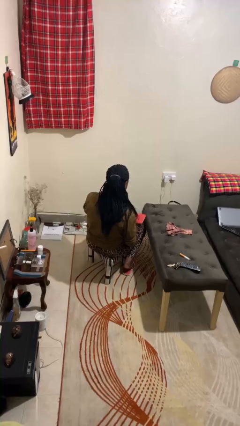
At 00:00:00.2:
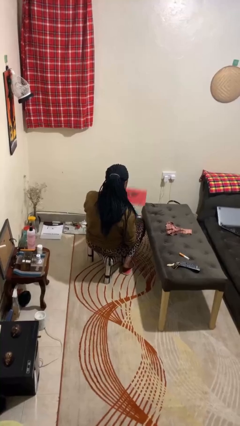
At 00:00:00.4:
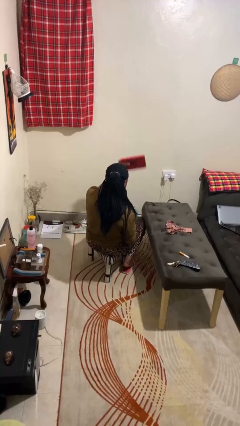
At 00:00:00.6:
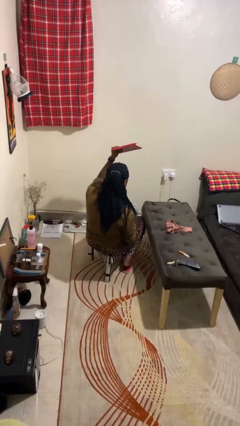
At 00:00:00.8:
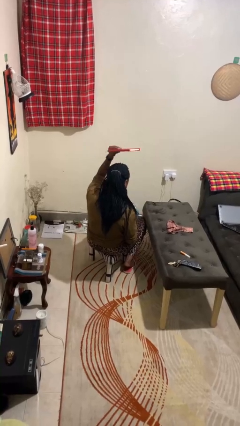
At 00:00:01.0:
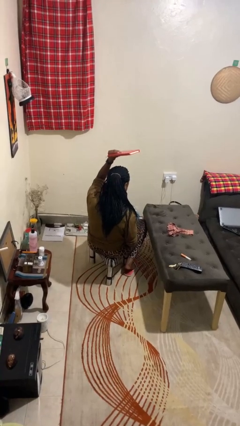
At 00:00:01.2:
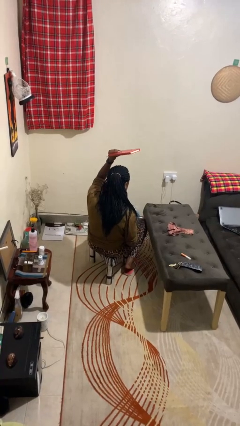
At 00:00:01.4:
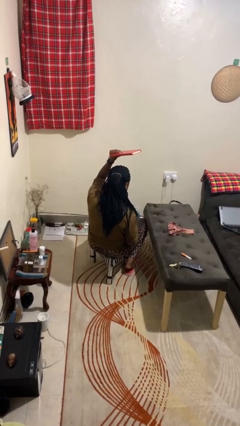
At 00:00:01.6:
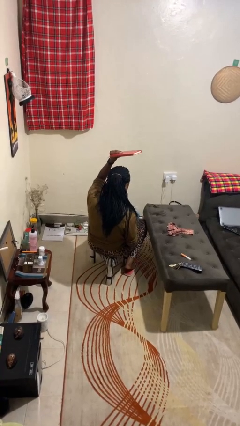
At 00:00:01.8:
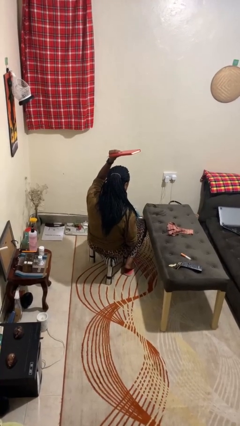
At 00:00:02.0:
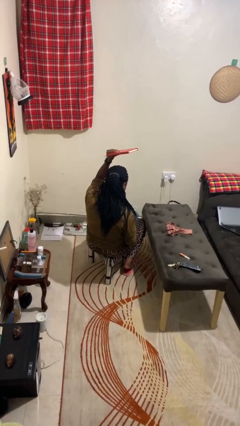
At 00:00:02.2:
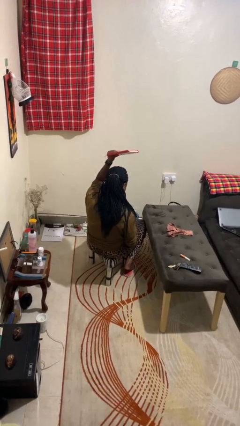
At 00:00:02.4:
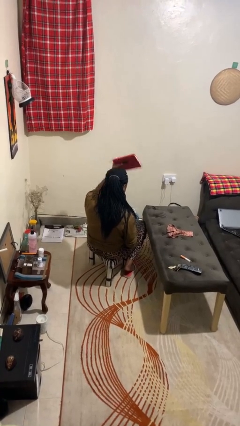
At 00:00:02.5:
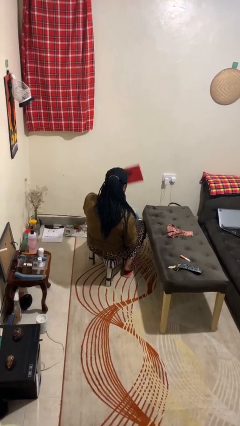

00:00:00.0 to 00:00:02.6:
person holds object above head

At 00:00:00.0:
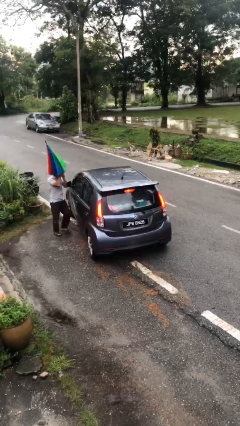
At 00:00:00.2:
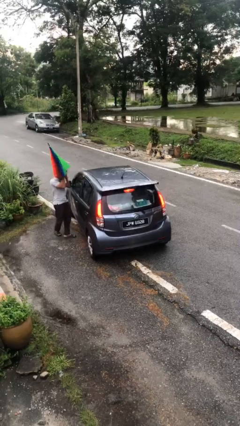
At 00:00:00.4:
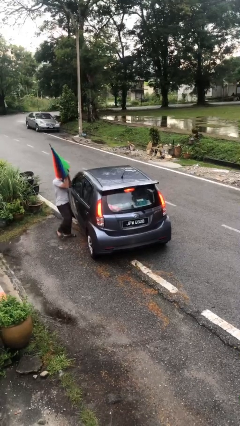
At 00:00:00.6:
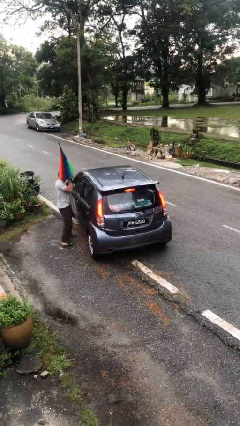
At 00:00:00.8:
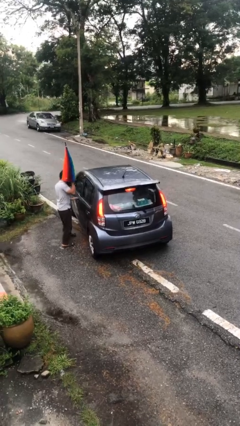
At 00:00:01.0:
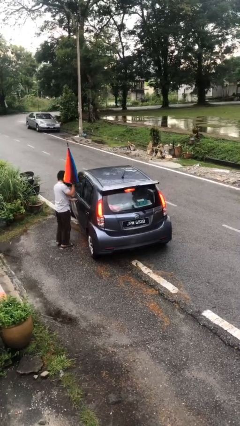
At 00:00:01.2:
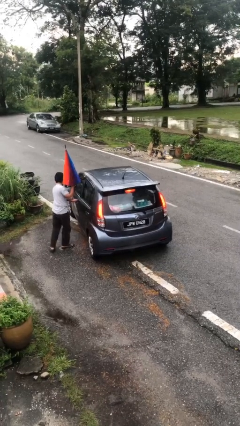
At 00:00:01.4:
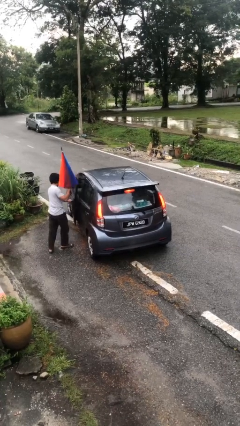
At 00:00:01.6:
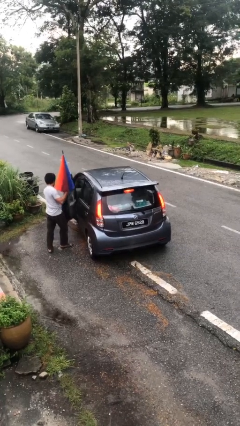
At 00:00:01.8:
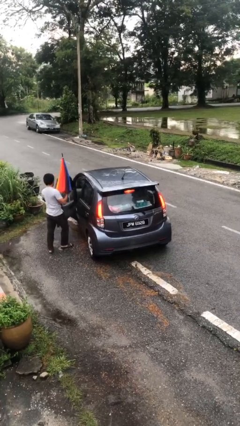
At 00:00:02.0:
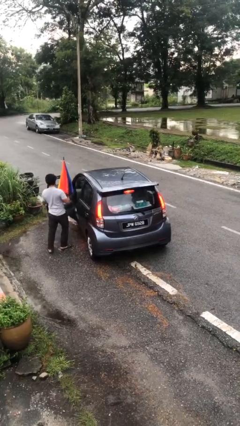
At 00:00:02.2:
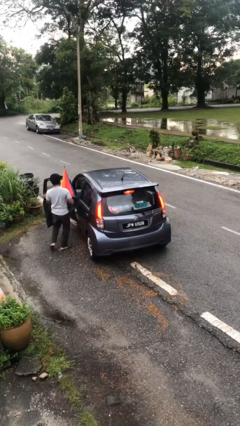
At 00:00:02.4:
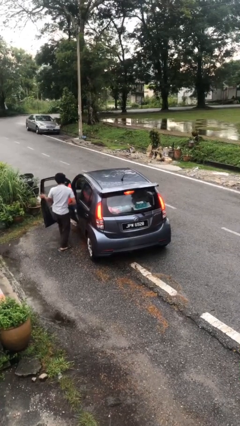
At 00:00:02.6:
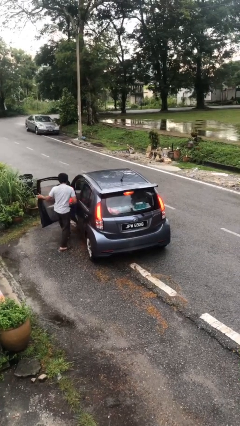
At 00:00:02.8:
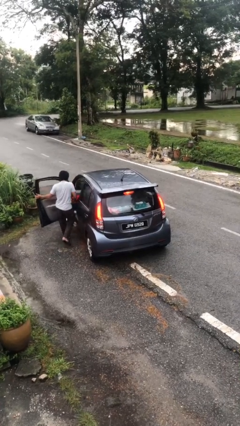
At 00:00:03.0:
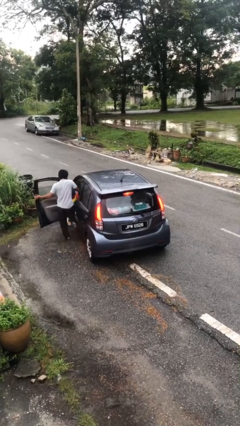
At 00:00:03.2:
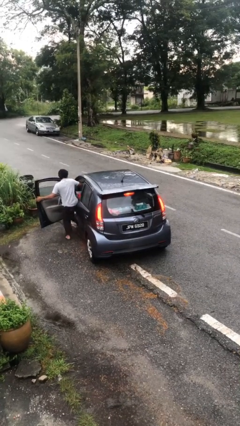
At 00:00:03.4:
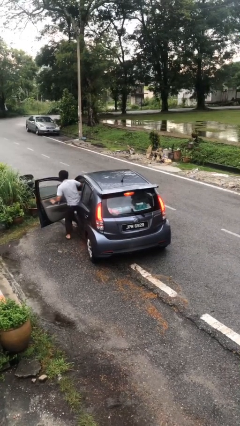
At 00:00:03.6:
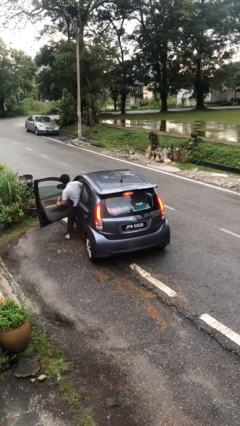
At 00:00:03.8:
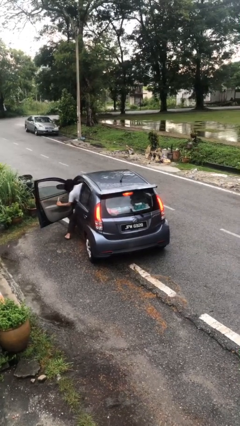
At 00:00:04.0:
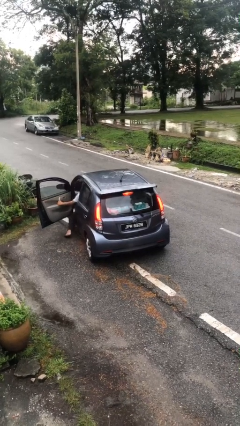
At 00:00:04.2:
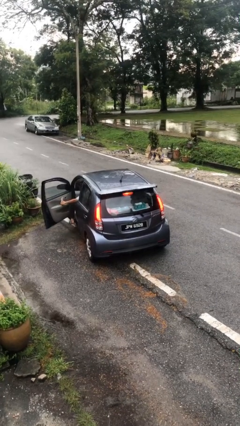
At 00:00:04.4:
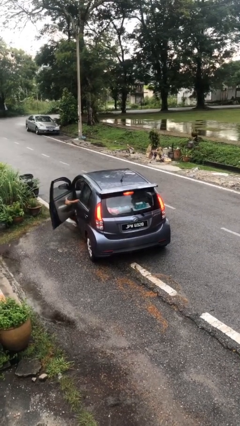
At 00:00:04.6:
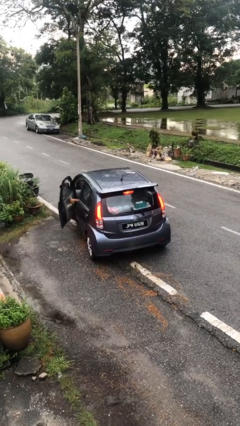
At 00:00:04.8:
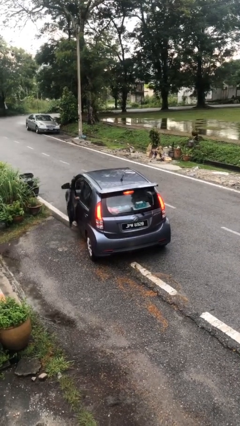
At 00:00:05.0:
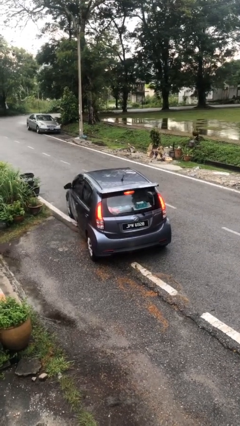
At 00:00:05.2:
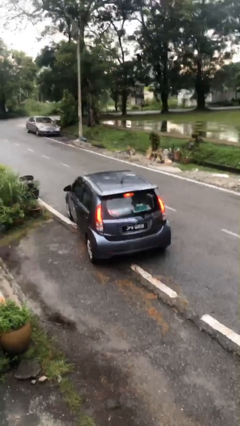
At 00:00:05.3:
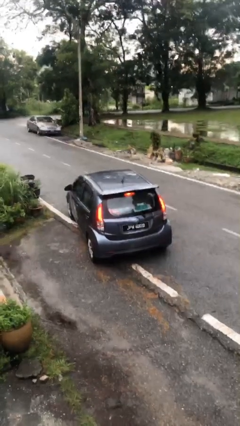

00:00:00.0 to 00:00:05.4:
car picks up person

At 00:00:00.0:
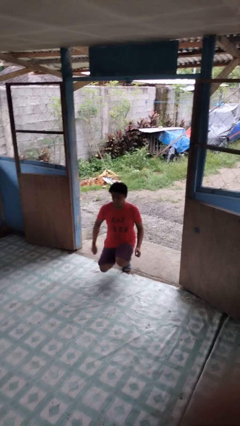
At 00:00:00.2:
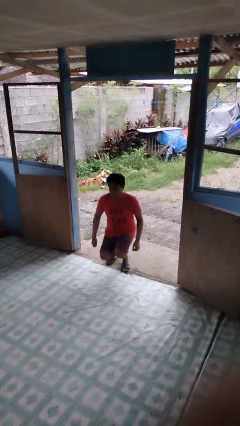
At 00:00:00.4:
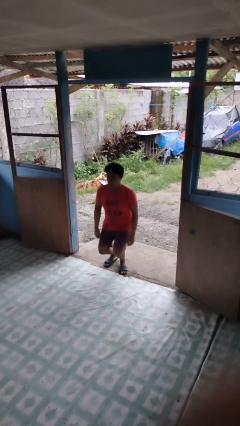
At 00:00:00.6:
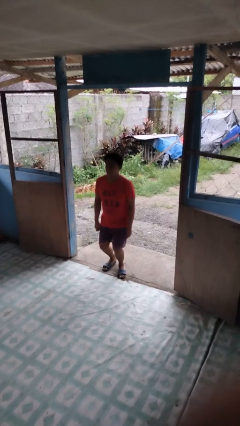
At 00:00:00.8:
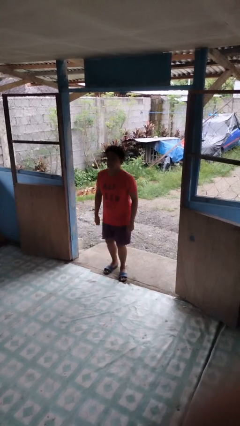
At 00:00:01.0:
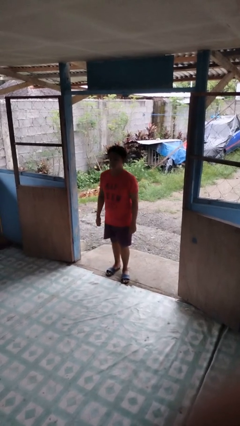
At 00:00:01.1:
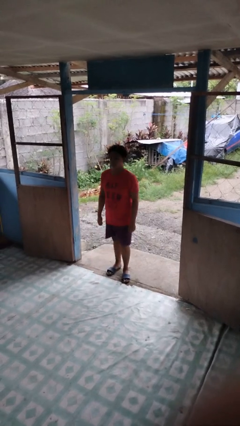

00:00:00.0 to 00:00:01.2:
person stands up from floor

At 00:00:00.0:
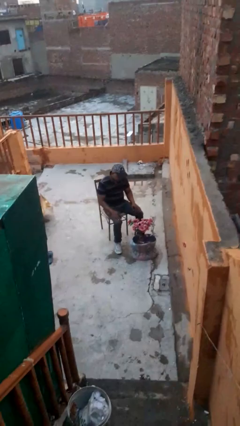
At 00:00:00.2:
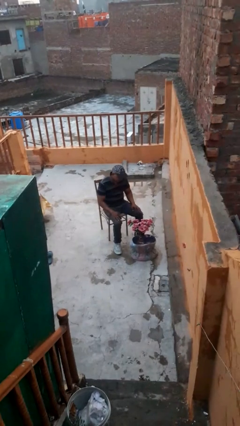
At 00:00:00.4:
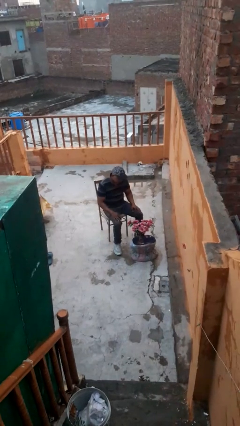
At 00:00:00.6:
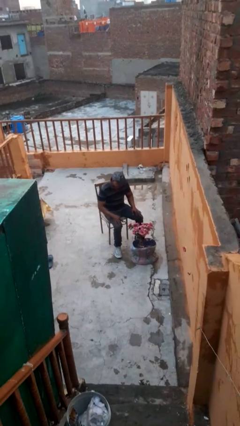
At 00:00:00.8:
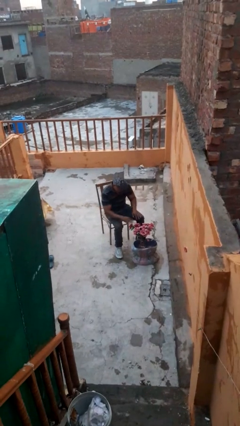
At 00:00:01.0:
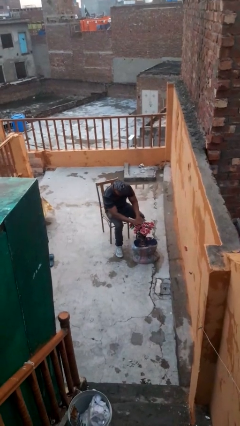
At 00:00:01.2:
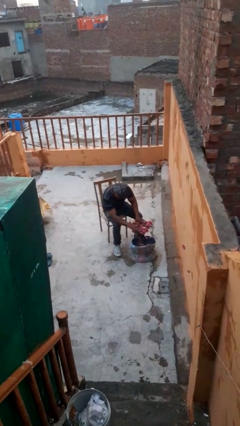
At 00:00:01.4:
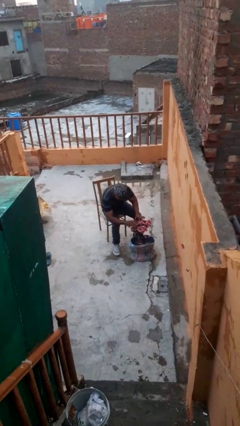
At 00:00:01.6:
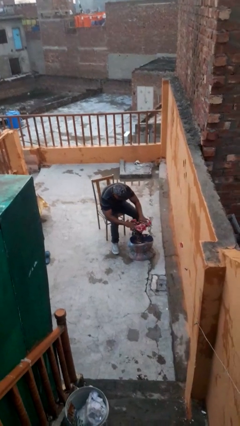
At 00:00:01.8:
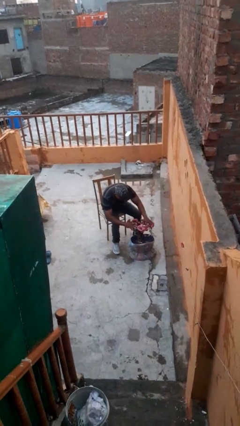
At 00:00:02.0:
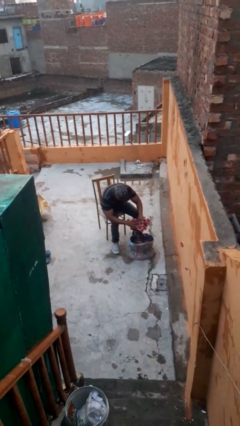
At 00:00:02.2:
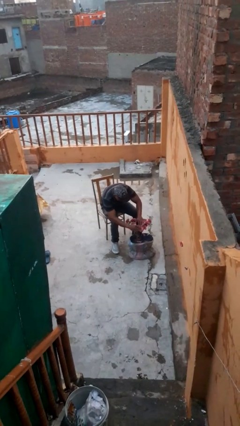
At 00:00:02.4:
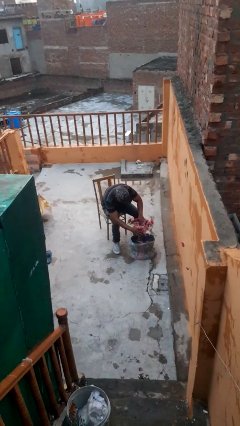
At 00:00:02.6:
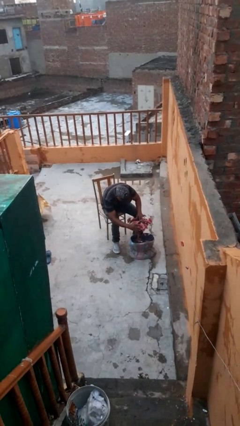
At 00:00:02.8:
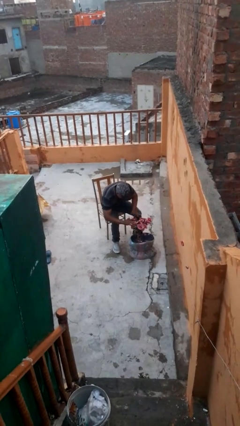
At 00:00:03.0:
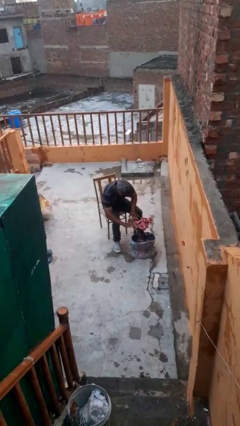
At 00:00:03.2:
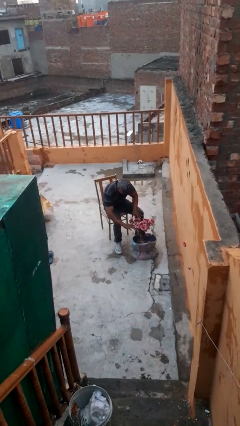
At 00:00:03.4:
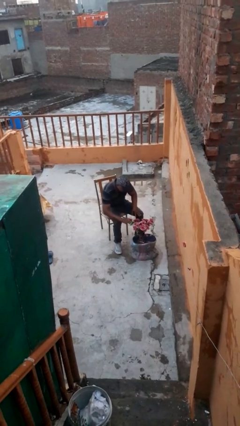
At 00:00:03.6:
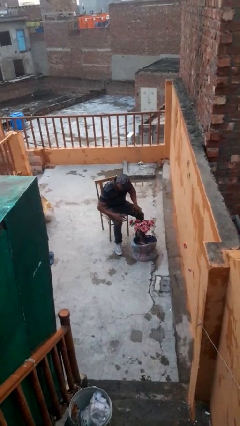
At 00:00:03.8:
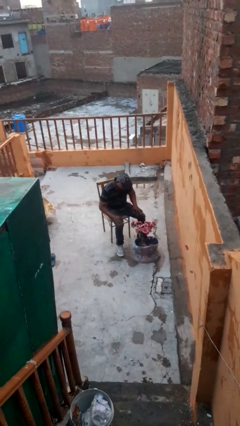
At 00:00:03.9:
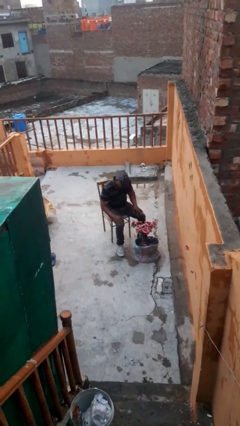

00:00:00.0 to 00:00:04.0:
person arranges flowers in vase

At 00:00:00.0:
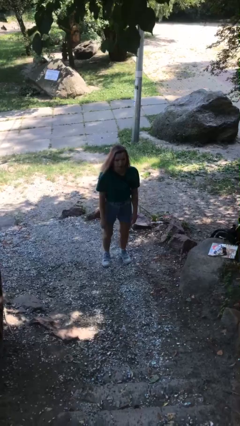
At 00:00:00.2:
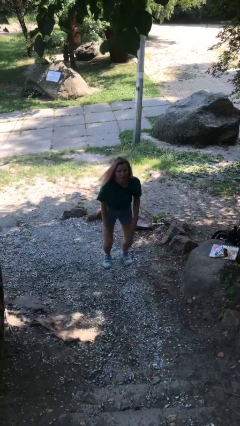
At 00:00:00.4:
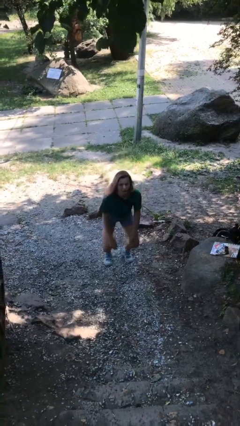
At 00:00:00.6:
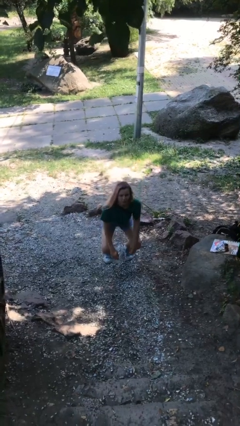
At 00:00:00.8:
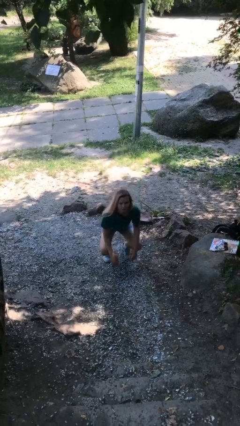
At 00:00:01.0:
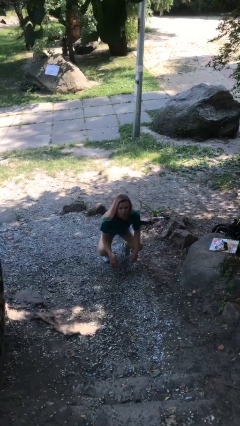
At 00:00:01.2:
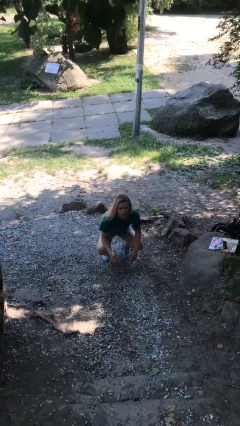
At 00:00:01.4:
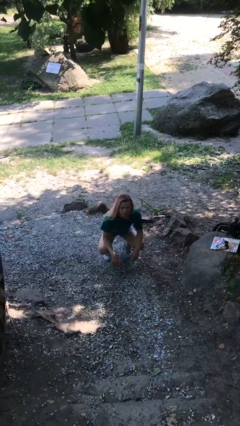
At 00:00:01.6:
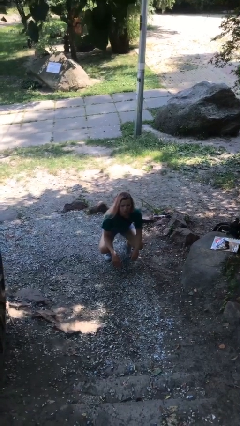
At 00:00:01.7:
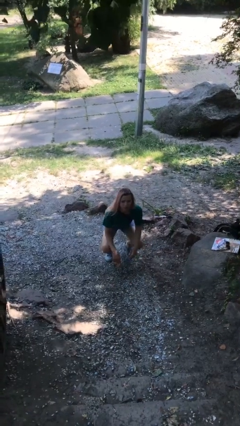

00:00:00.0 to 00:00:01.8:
person squats

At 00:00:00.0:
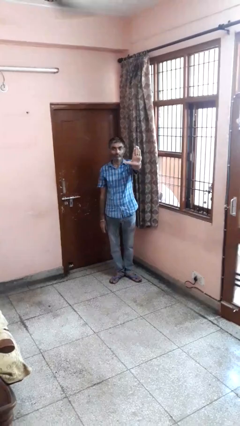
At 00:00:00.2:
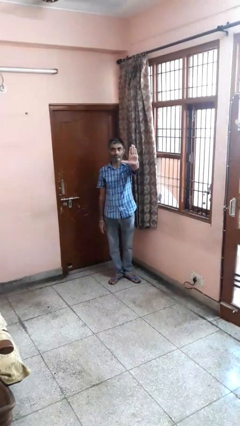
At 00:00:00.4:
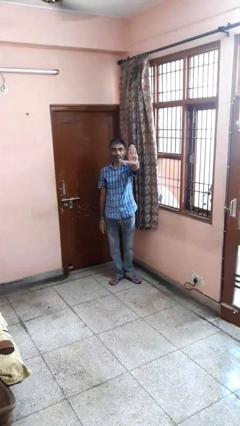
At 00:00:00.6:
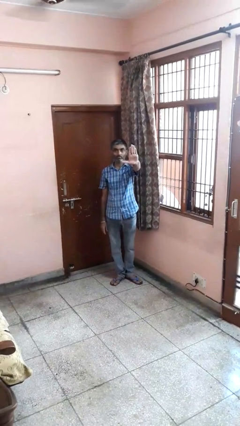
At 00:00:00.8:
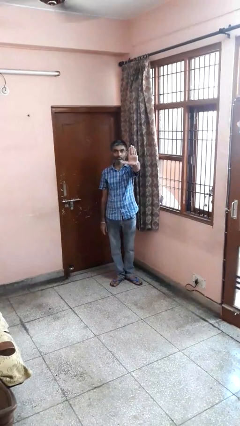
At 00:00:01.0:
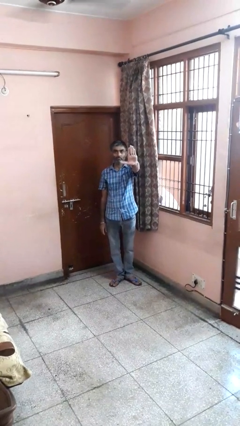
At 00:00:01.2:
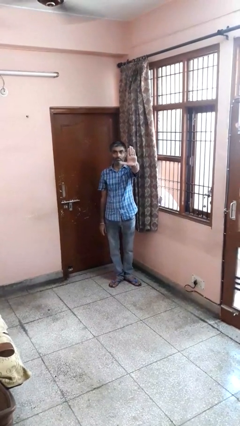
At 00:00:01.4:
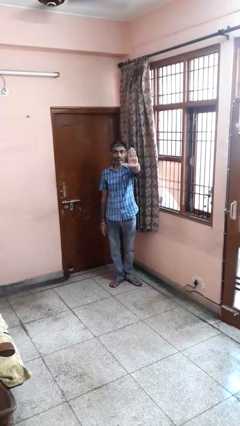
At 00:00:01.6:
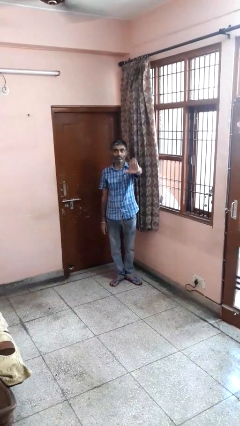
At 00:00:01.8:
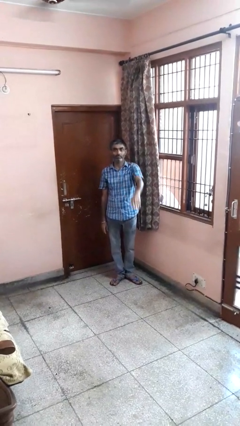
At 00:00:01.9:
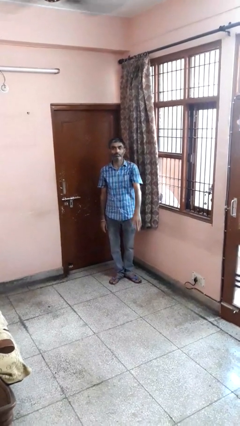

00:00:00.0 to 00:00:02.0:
person gestures stop

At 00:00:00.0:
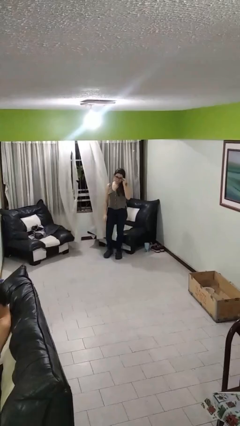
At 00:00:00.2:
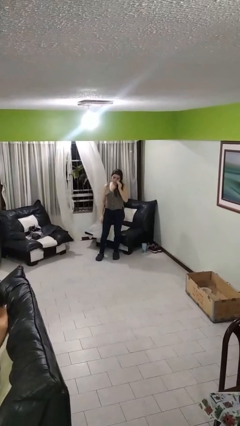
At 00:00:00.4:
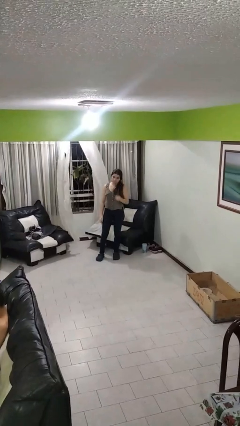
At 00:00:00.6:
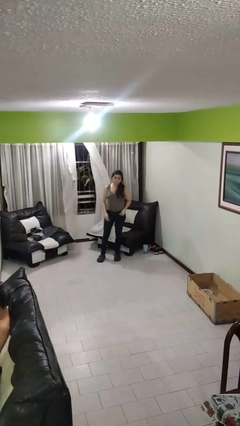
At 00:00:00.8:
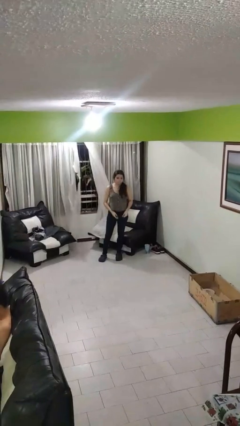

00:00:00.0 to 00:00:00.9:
person takes off glasses
